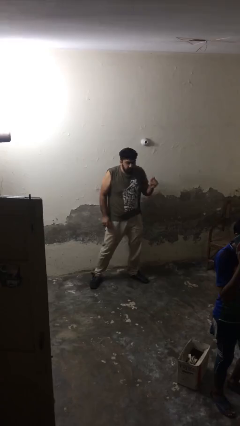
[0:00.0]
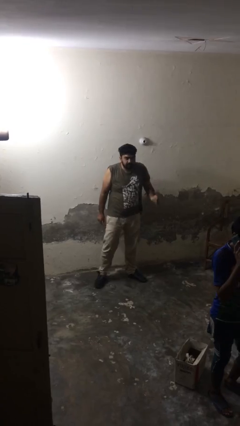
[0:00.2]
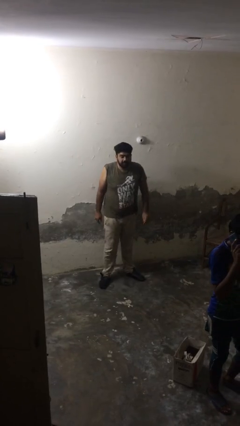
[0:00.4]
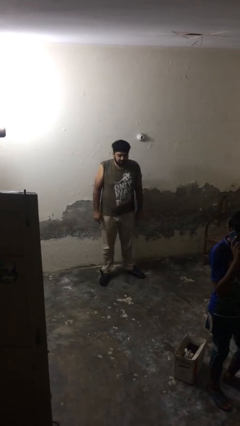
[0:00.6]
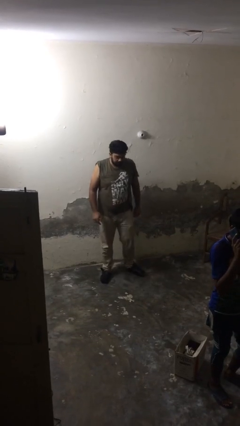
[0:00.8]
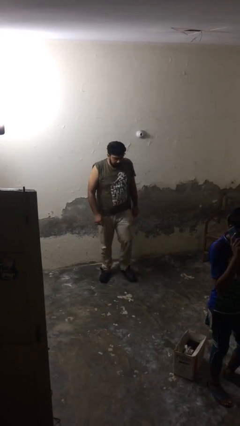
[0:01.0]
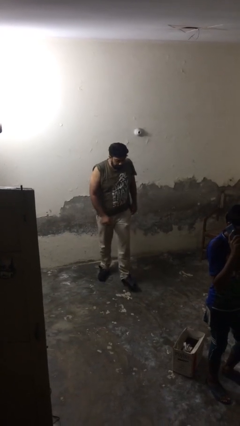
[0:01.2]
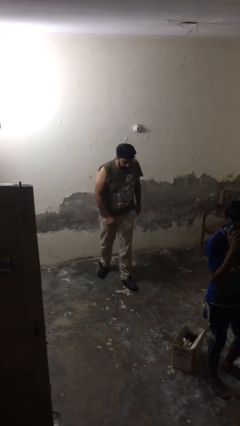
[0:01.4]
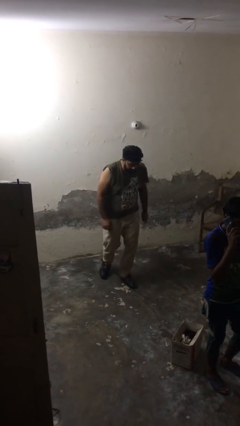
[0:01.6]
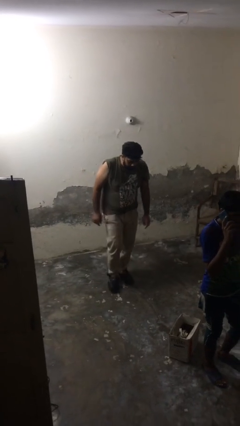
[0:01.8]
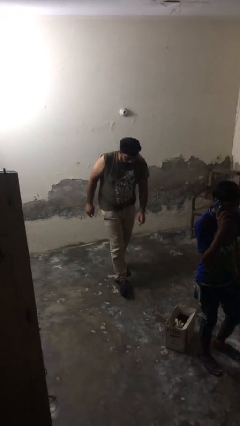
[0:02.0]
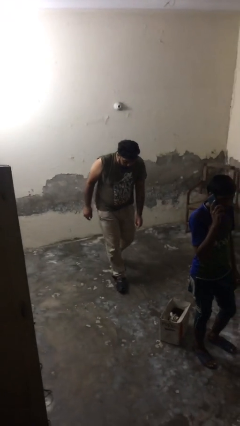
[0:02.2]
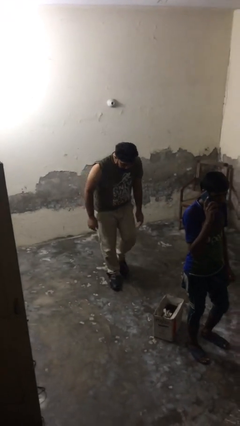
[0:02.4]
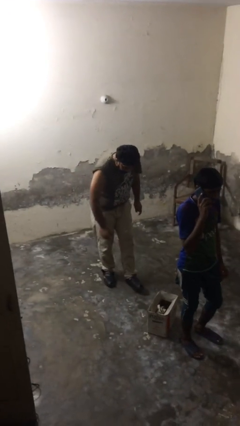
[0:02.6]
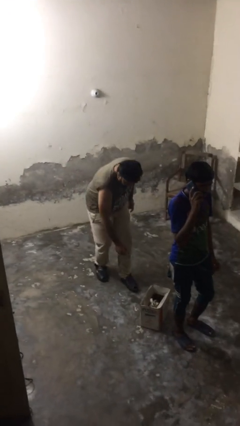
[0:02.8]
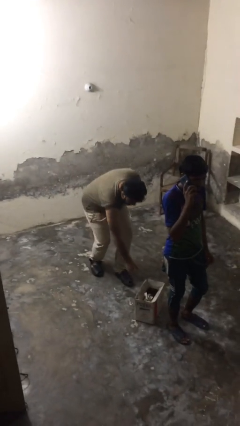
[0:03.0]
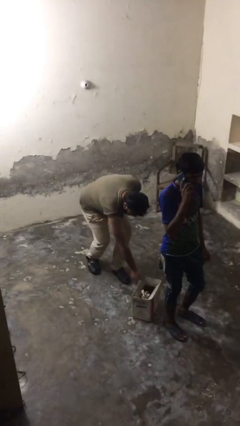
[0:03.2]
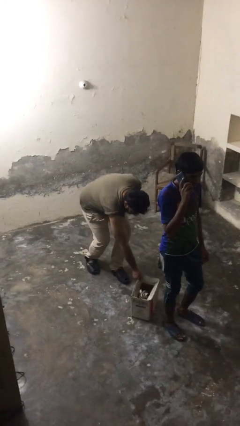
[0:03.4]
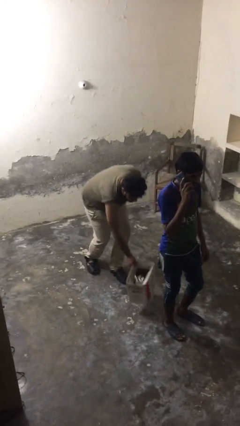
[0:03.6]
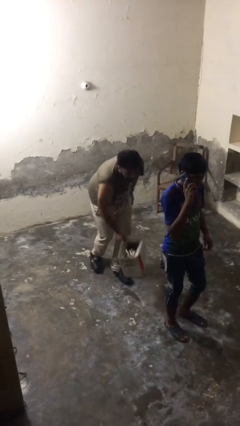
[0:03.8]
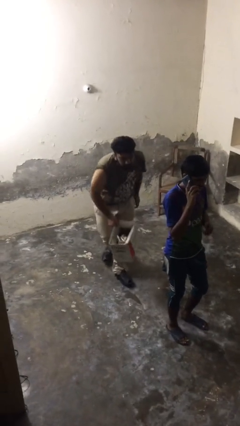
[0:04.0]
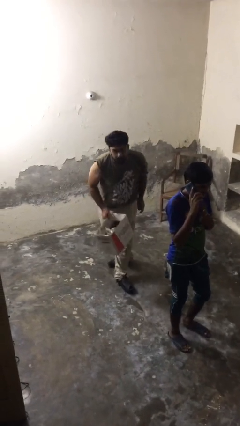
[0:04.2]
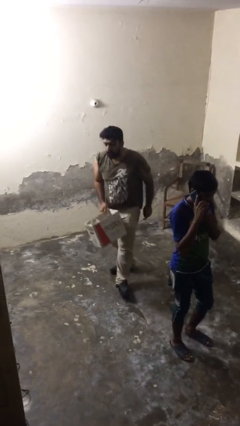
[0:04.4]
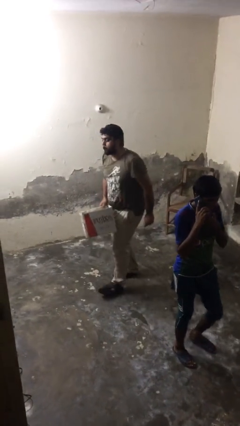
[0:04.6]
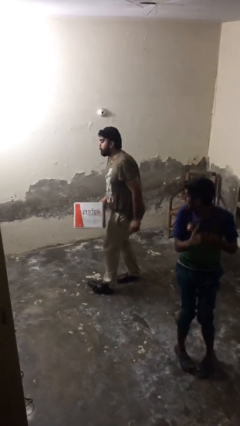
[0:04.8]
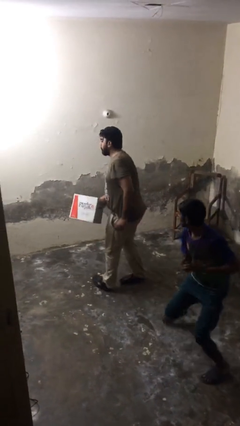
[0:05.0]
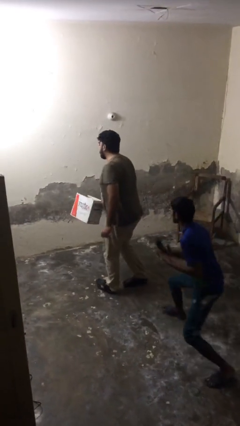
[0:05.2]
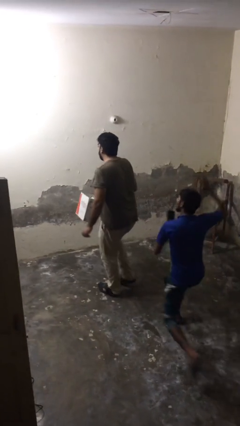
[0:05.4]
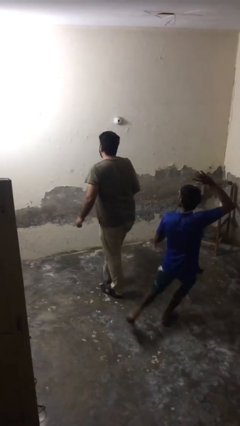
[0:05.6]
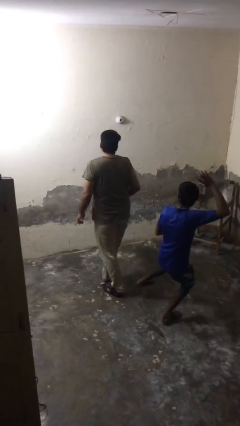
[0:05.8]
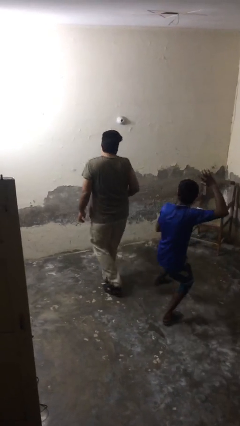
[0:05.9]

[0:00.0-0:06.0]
person steals object from person

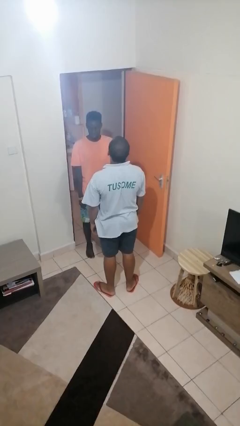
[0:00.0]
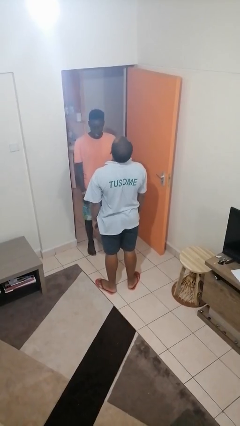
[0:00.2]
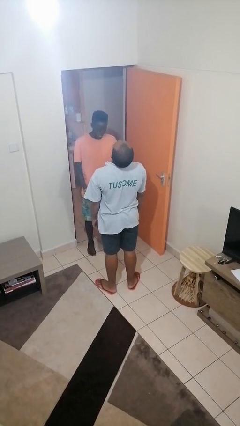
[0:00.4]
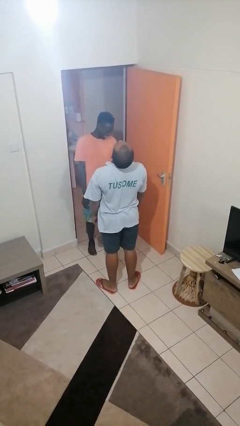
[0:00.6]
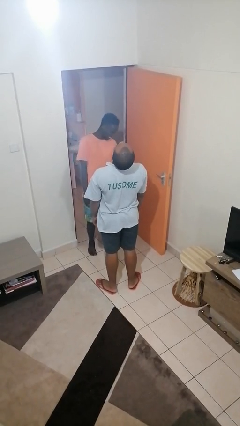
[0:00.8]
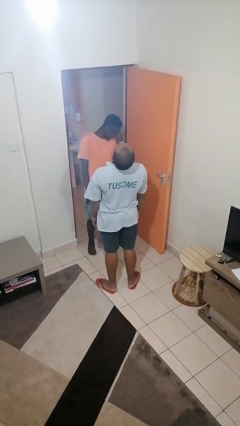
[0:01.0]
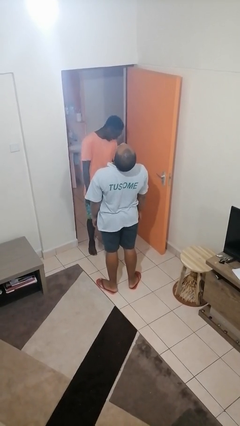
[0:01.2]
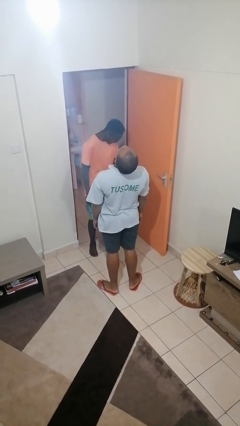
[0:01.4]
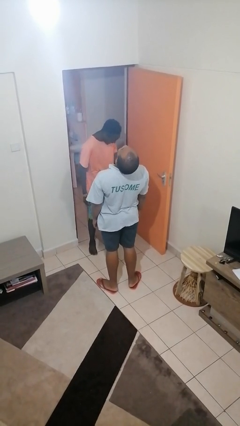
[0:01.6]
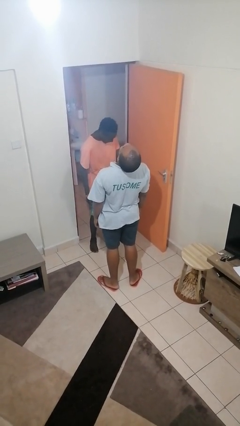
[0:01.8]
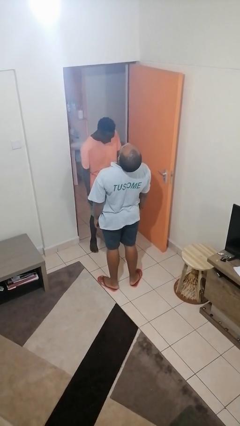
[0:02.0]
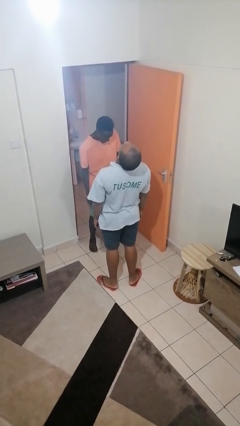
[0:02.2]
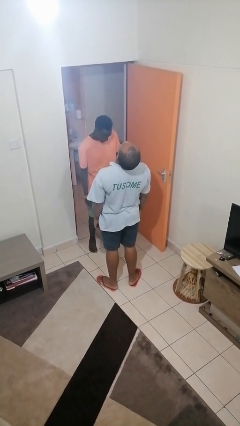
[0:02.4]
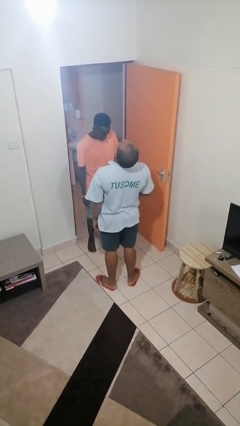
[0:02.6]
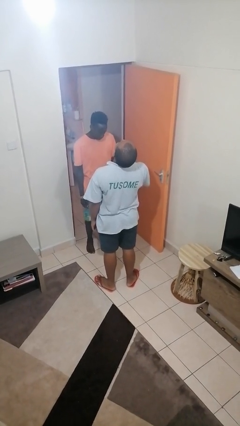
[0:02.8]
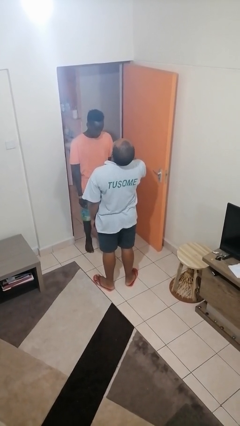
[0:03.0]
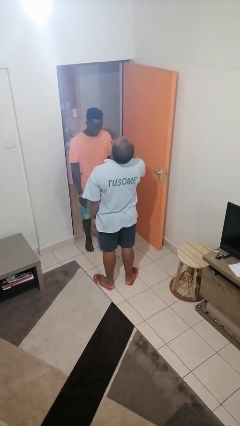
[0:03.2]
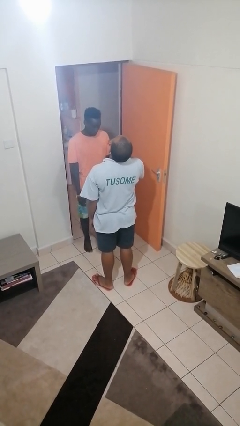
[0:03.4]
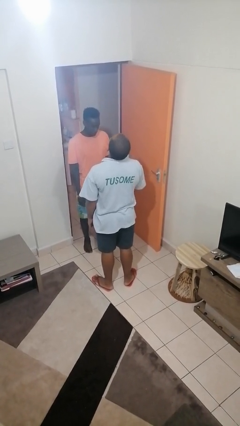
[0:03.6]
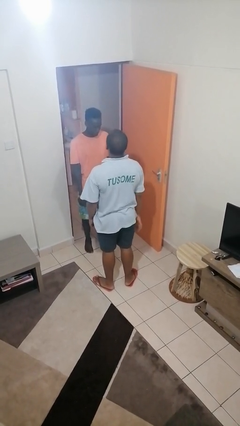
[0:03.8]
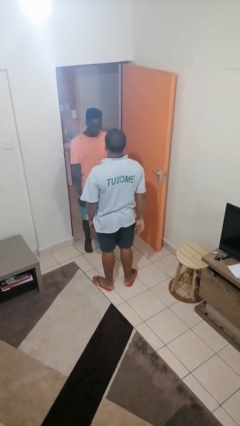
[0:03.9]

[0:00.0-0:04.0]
person laughs with person

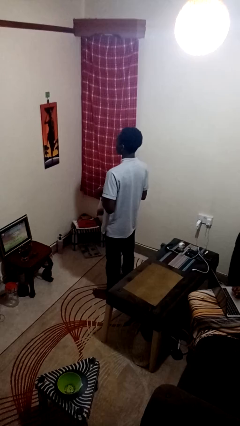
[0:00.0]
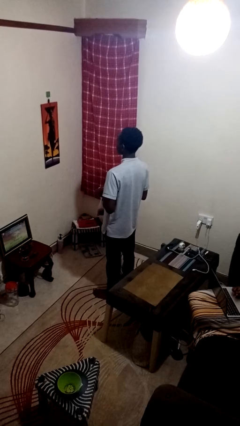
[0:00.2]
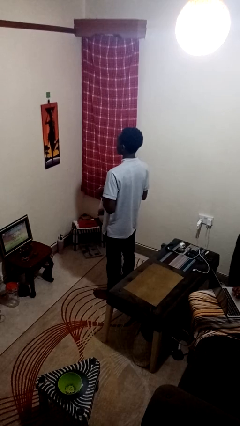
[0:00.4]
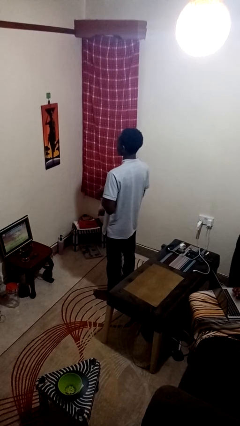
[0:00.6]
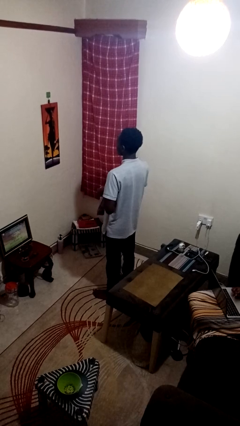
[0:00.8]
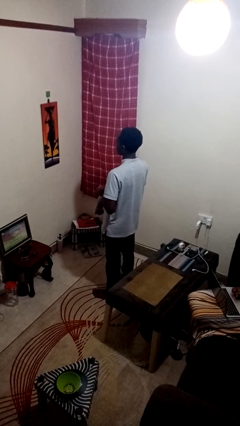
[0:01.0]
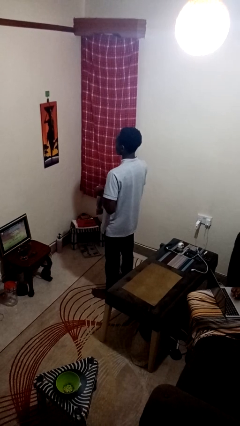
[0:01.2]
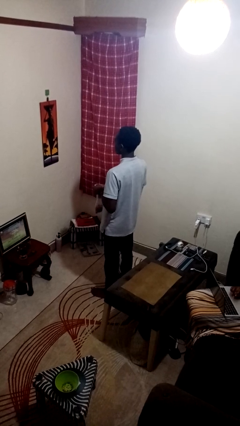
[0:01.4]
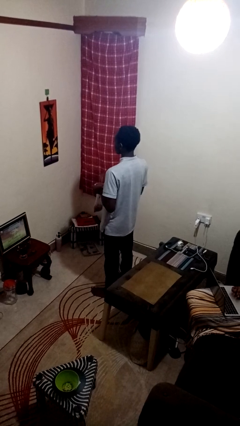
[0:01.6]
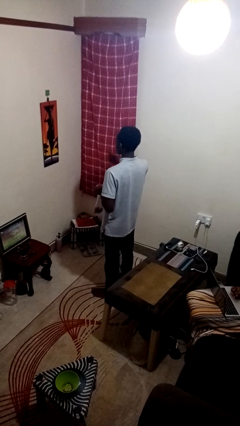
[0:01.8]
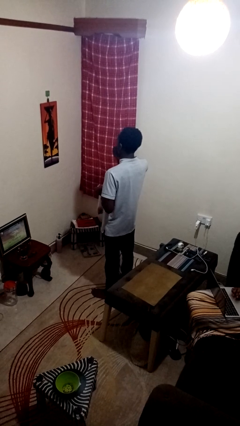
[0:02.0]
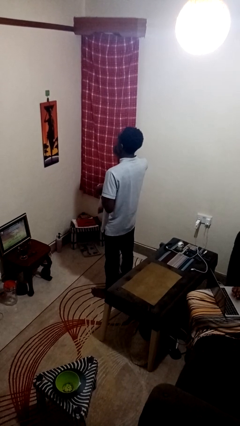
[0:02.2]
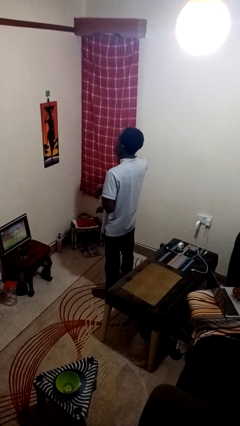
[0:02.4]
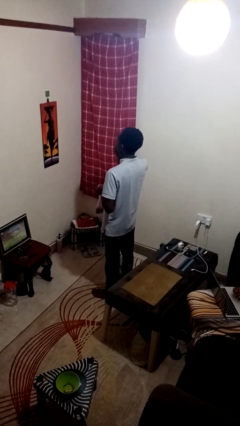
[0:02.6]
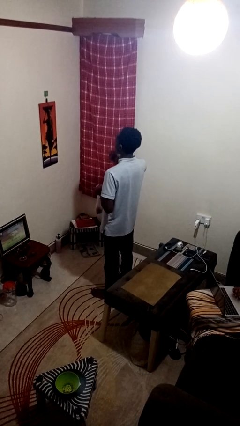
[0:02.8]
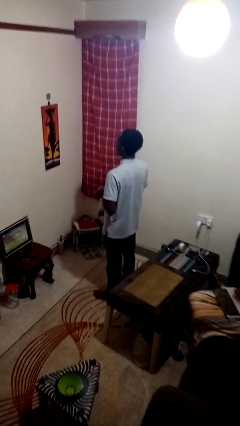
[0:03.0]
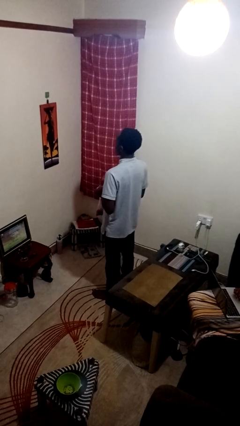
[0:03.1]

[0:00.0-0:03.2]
person eats snack from bag

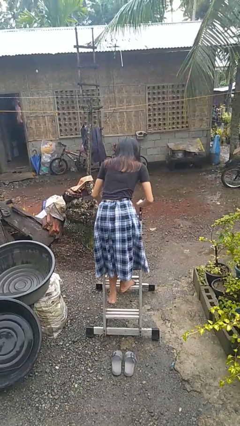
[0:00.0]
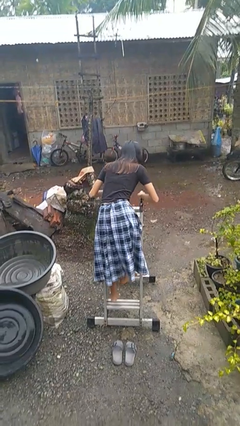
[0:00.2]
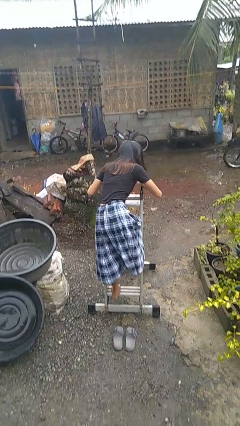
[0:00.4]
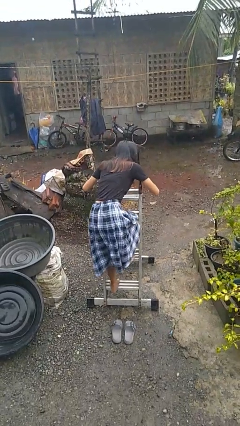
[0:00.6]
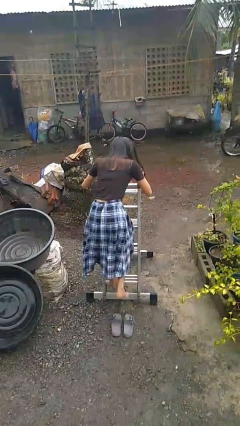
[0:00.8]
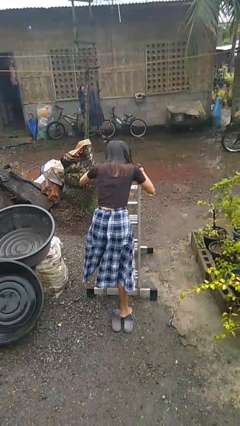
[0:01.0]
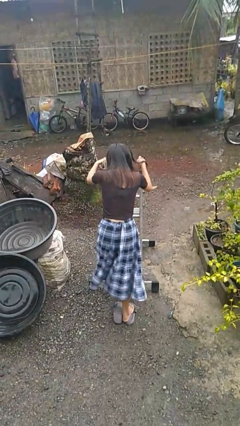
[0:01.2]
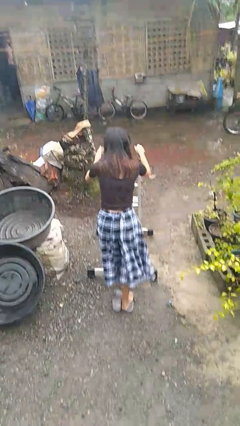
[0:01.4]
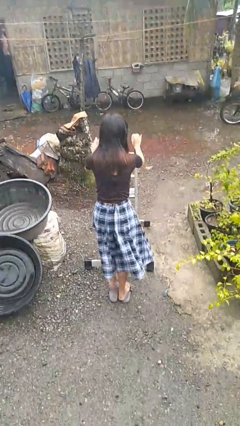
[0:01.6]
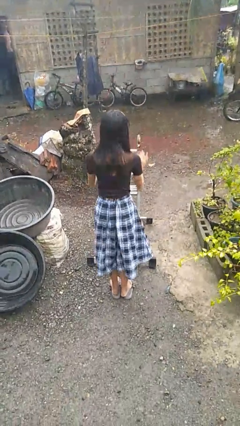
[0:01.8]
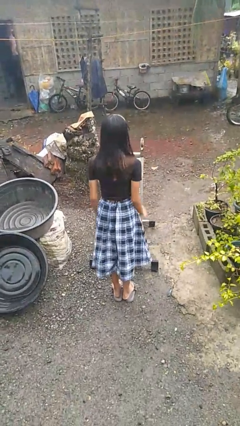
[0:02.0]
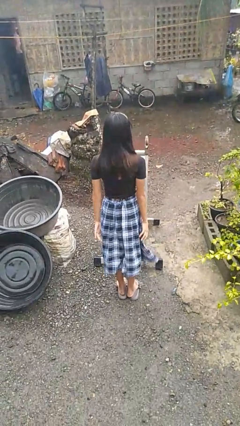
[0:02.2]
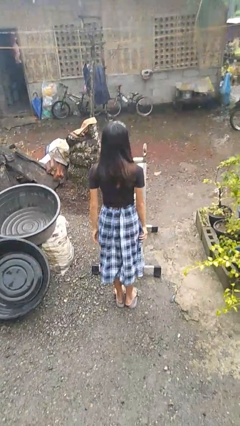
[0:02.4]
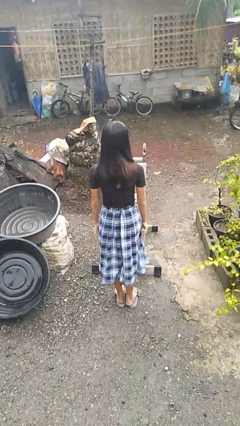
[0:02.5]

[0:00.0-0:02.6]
person climbs down ladder

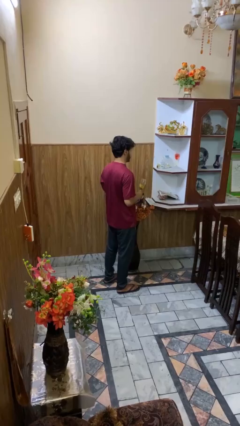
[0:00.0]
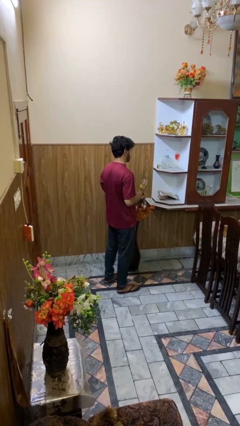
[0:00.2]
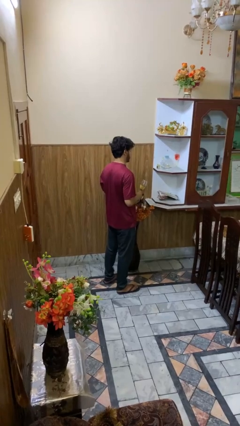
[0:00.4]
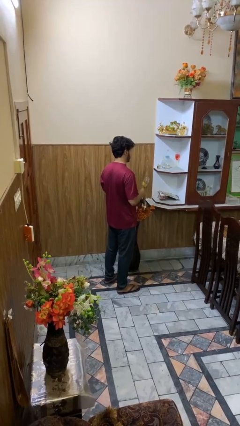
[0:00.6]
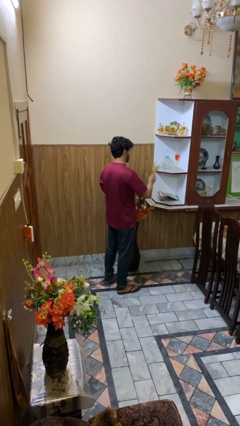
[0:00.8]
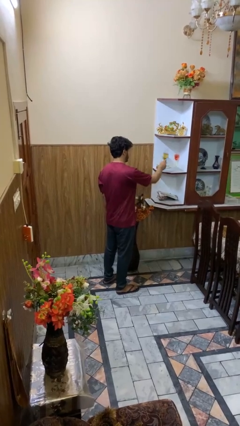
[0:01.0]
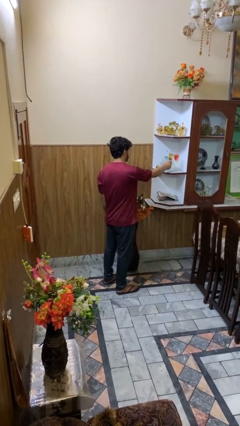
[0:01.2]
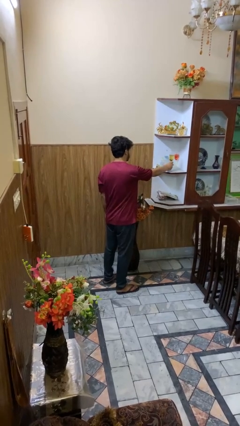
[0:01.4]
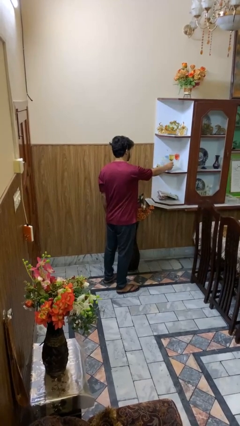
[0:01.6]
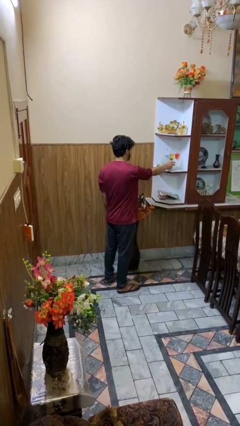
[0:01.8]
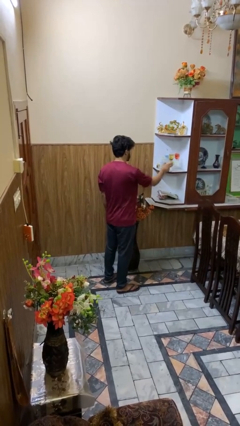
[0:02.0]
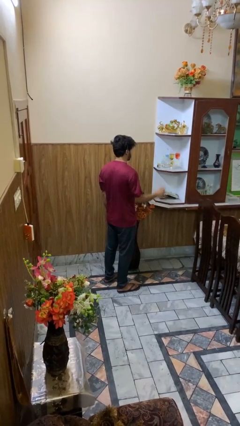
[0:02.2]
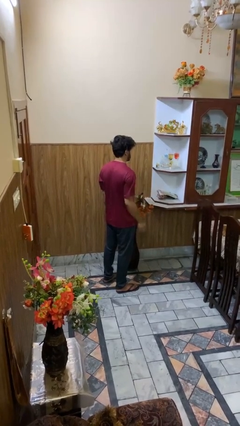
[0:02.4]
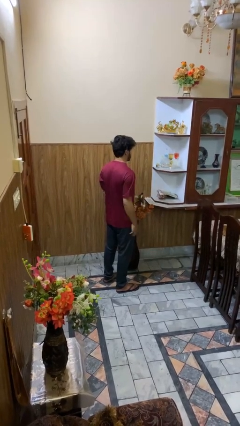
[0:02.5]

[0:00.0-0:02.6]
person puts down object into cabinet
